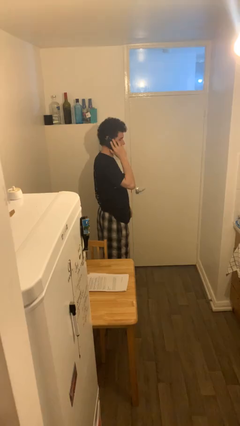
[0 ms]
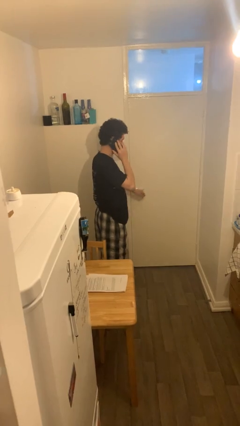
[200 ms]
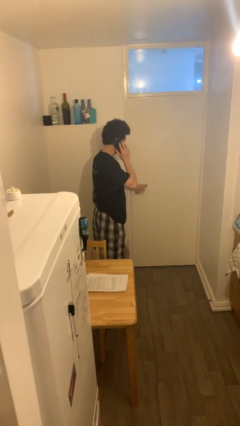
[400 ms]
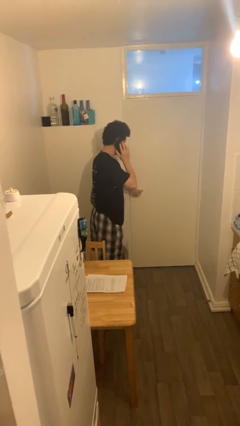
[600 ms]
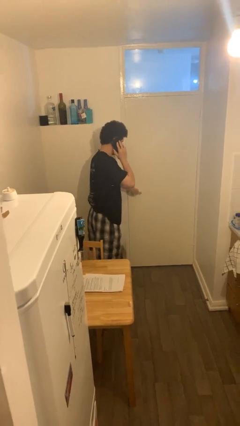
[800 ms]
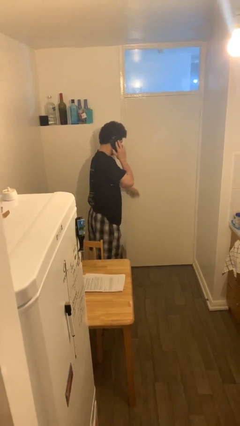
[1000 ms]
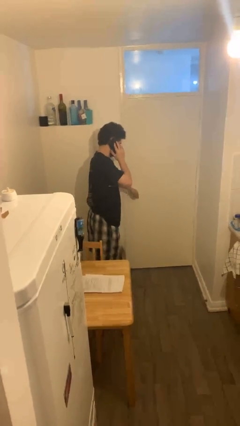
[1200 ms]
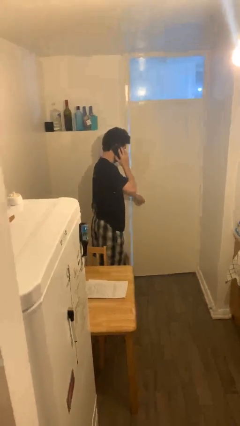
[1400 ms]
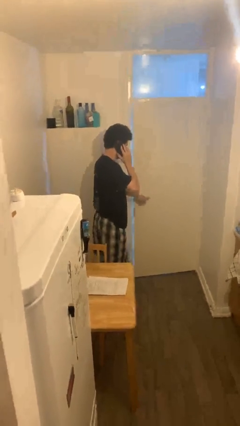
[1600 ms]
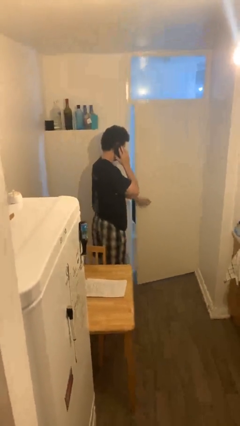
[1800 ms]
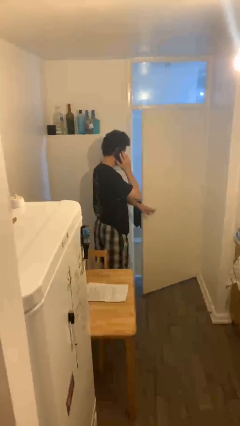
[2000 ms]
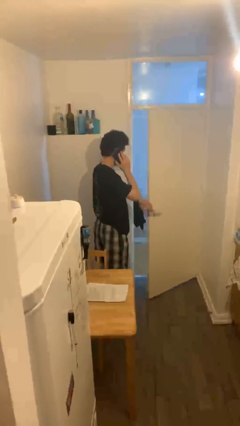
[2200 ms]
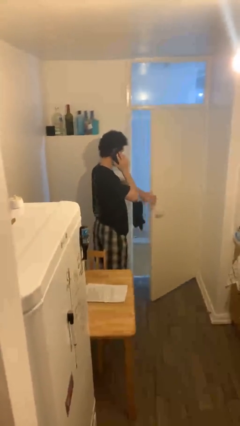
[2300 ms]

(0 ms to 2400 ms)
person opens facility door

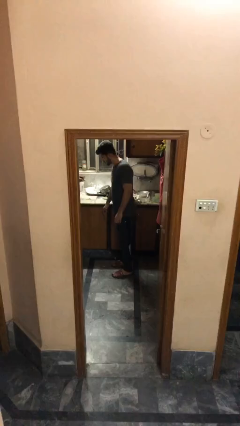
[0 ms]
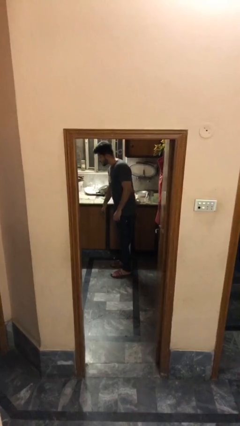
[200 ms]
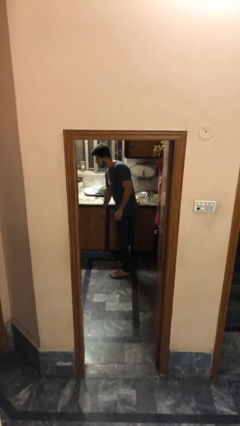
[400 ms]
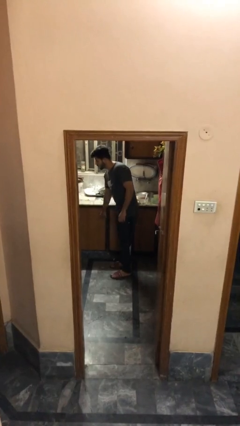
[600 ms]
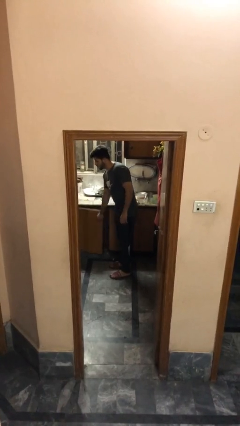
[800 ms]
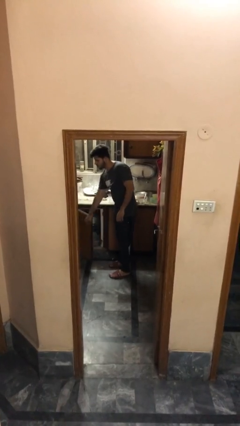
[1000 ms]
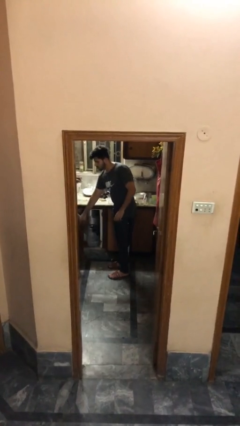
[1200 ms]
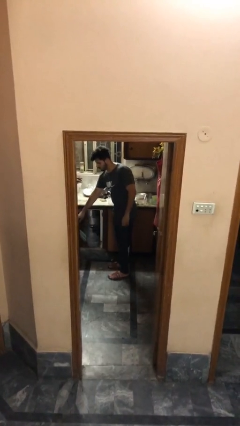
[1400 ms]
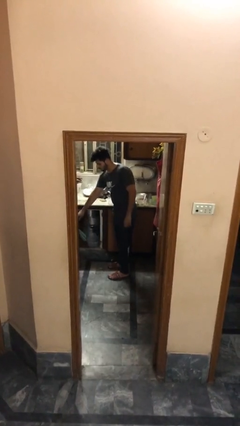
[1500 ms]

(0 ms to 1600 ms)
person opens cabinet

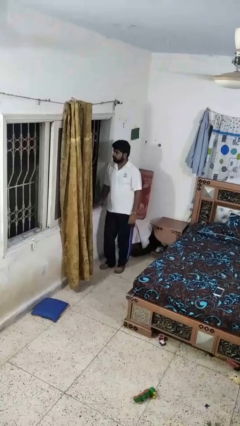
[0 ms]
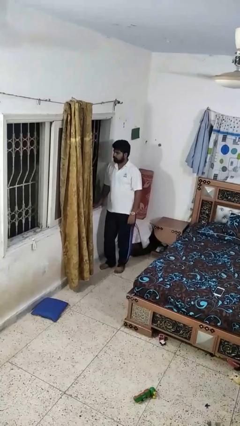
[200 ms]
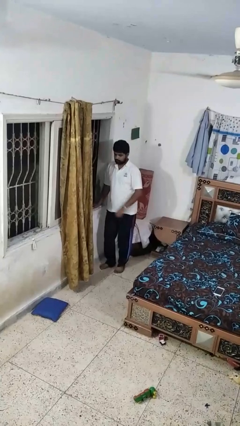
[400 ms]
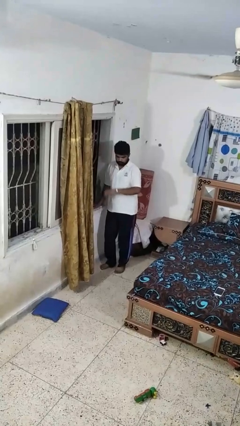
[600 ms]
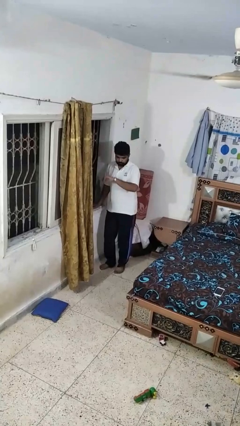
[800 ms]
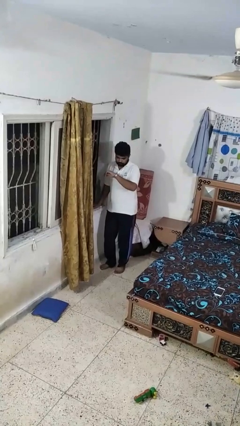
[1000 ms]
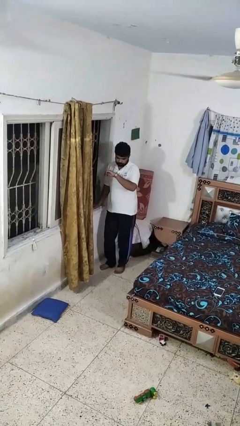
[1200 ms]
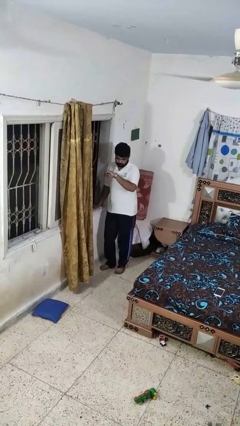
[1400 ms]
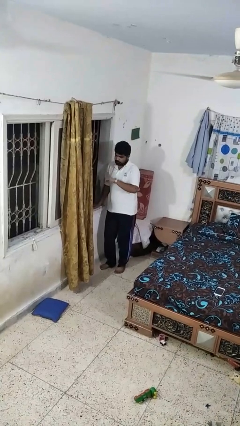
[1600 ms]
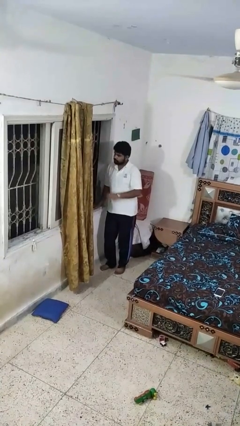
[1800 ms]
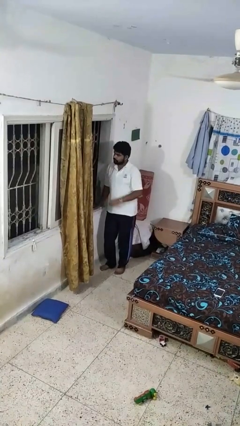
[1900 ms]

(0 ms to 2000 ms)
person looks at wristwatch

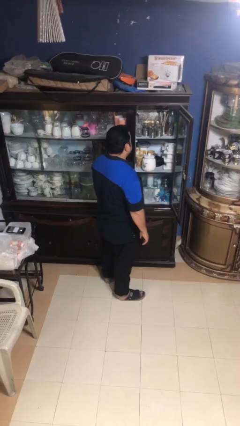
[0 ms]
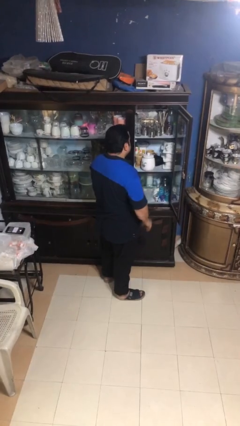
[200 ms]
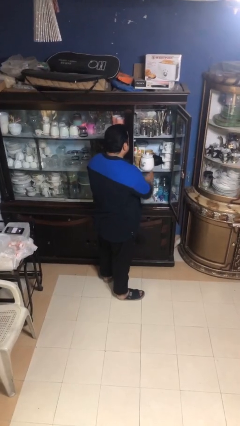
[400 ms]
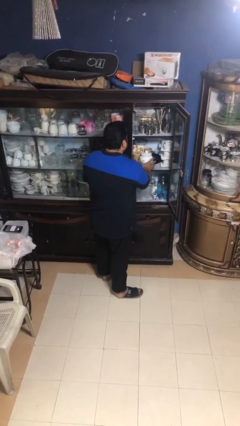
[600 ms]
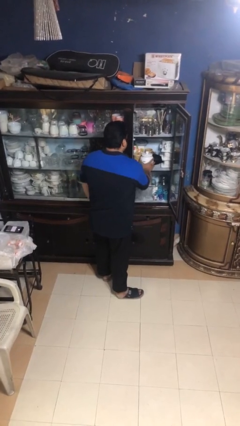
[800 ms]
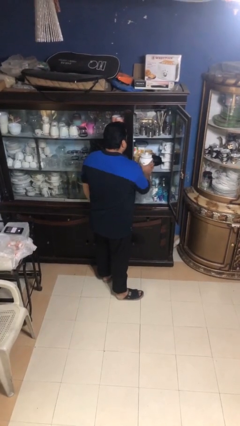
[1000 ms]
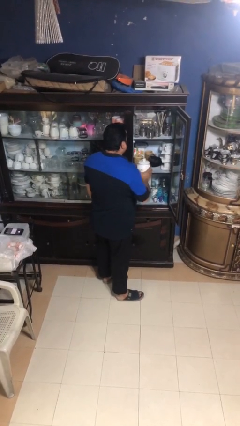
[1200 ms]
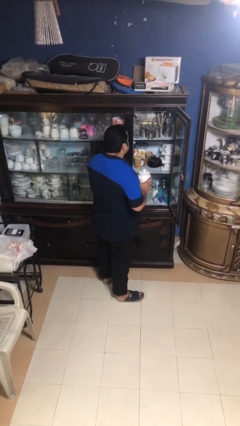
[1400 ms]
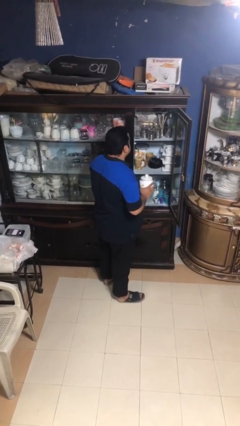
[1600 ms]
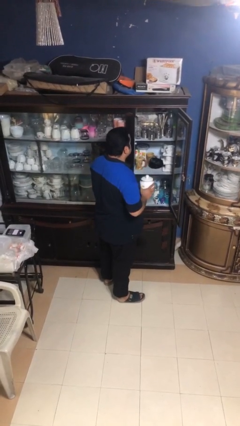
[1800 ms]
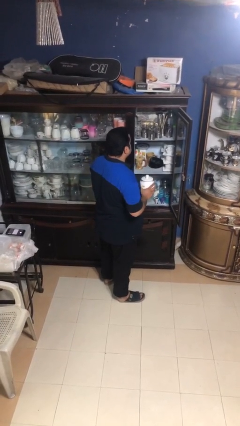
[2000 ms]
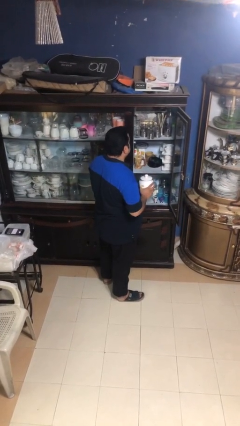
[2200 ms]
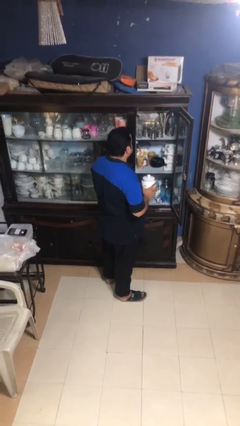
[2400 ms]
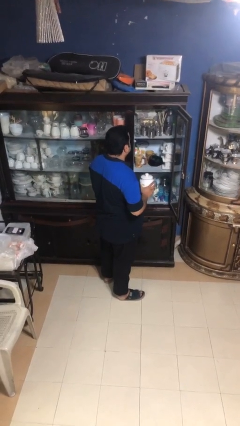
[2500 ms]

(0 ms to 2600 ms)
person picks up object from cabinet

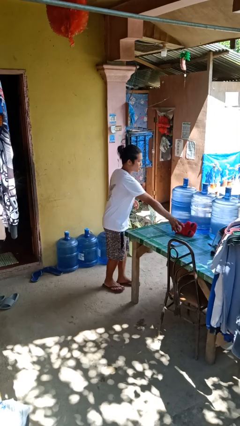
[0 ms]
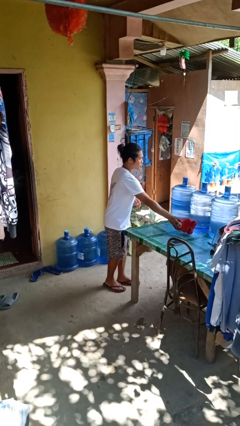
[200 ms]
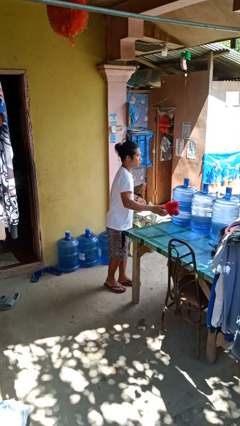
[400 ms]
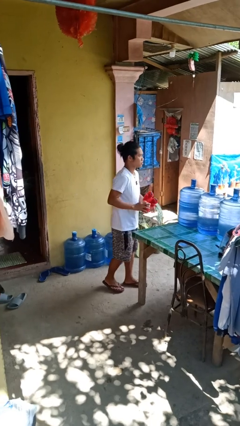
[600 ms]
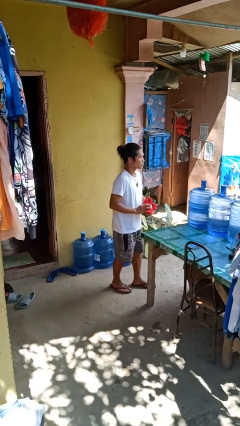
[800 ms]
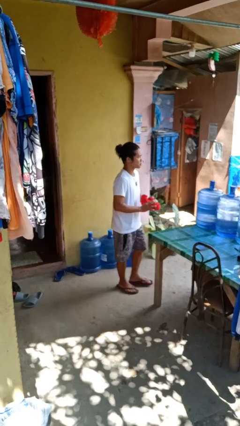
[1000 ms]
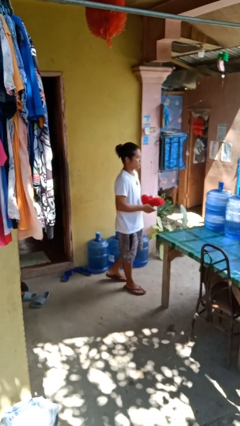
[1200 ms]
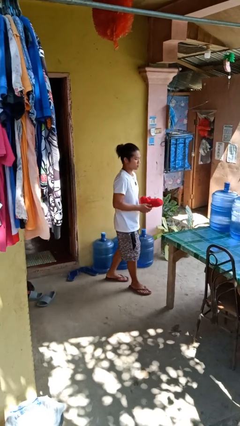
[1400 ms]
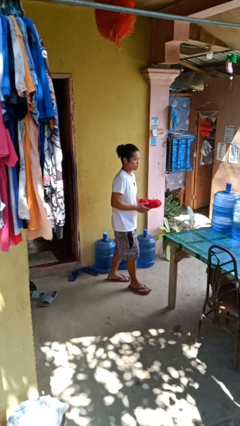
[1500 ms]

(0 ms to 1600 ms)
person picks up object from table

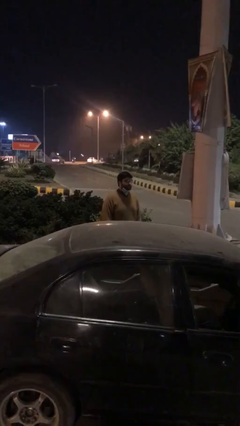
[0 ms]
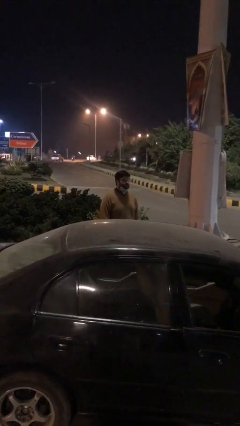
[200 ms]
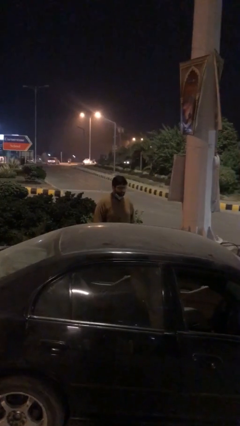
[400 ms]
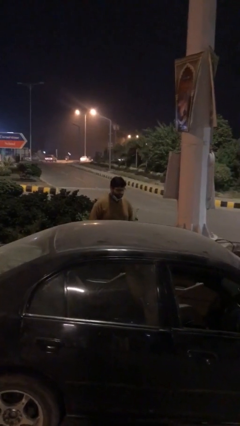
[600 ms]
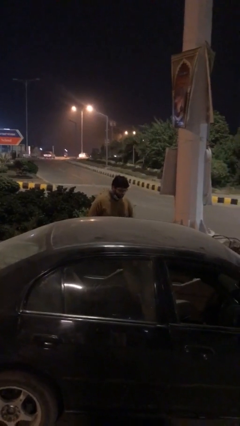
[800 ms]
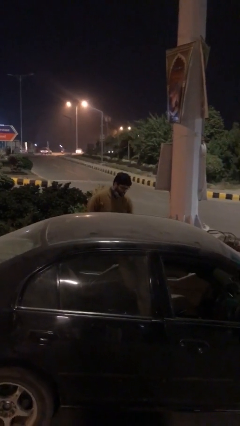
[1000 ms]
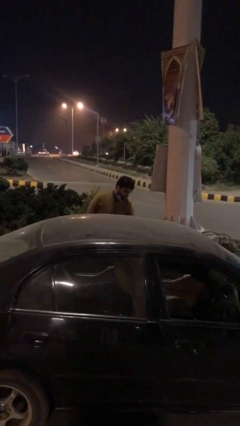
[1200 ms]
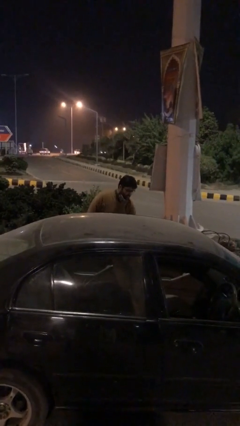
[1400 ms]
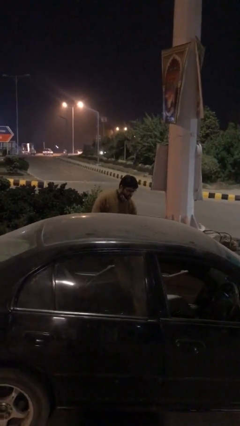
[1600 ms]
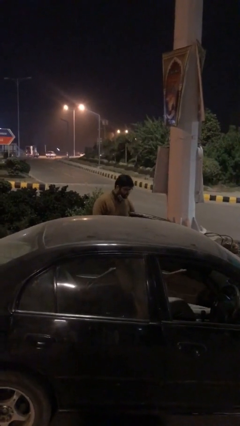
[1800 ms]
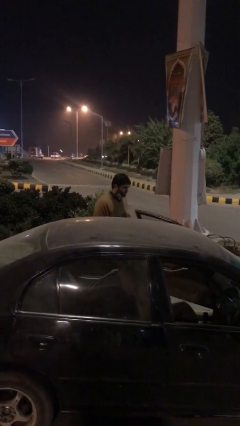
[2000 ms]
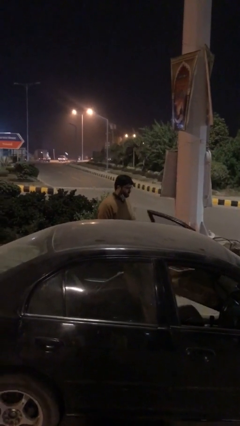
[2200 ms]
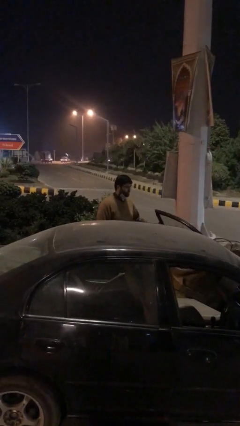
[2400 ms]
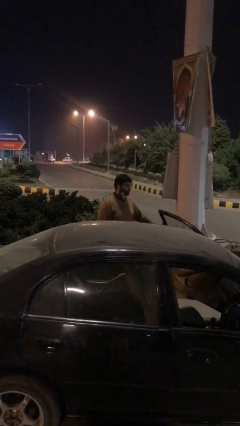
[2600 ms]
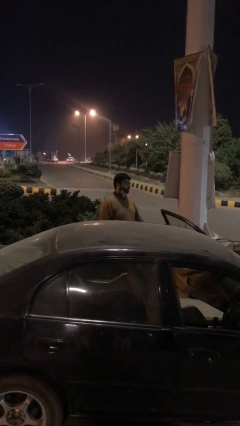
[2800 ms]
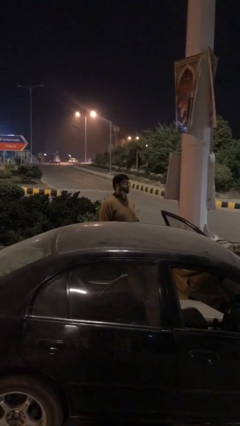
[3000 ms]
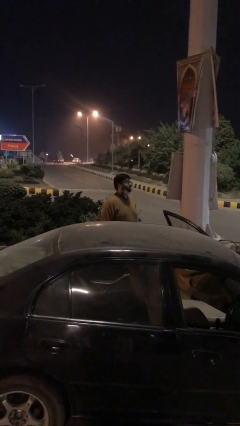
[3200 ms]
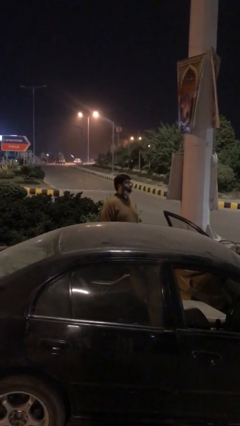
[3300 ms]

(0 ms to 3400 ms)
person opens car door

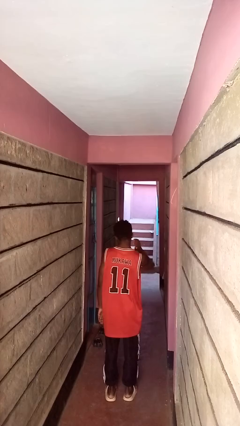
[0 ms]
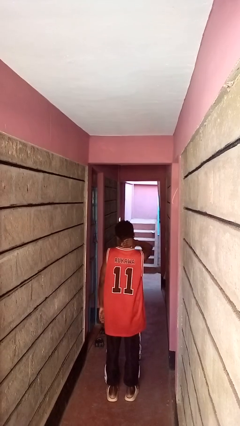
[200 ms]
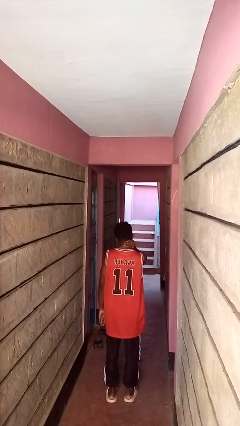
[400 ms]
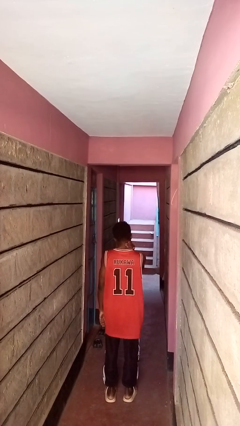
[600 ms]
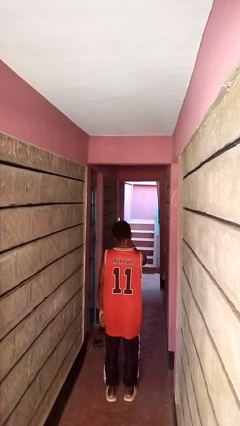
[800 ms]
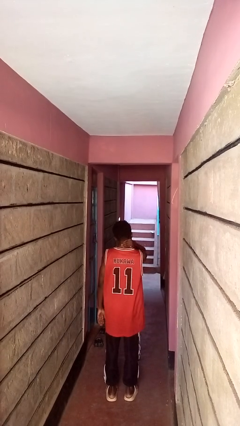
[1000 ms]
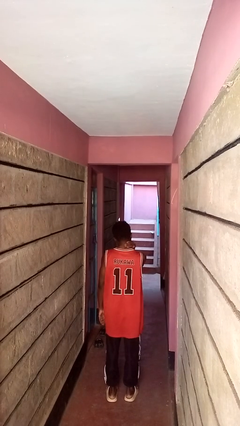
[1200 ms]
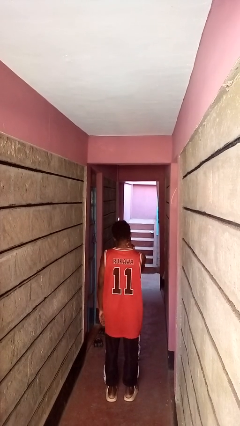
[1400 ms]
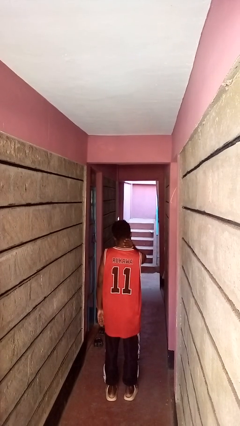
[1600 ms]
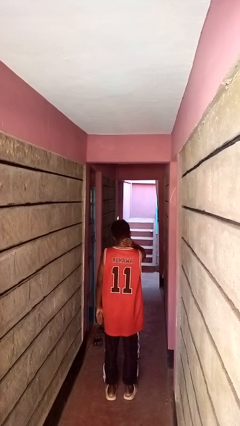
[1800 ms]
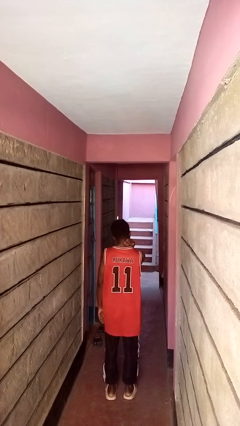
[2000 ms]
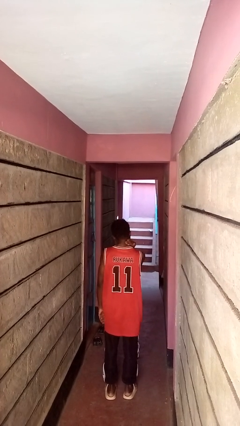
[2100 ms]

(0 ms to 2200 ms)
person rubs neck

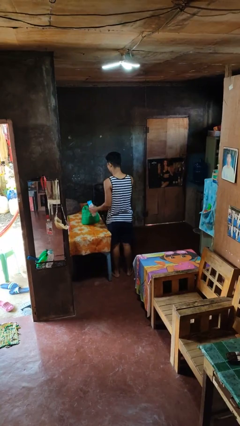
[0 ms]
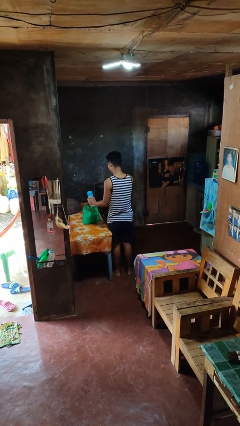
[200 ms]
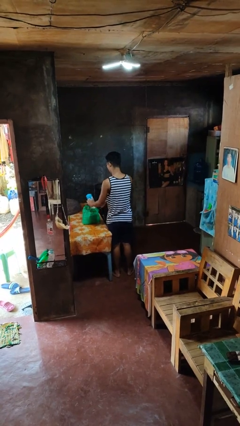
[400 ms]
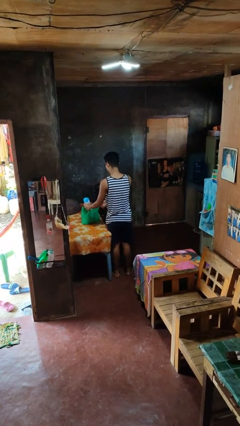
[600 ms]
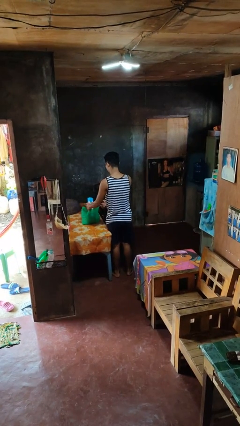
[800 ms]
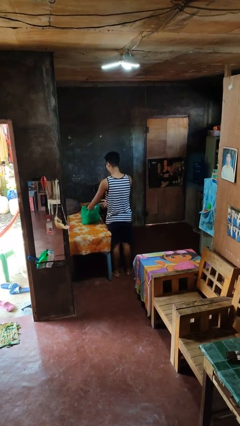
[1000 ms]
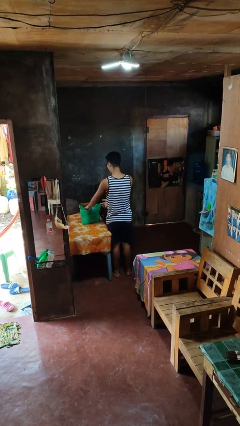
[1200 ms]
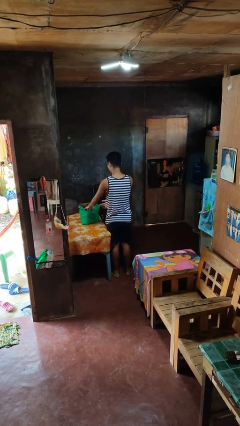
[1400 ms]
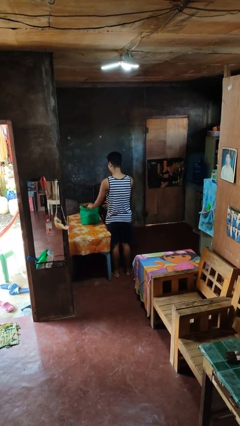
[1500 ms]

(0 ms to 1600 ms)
person puts object into bag
